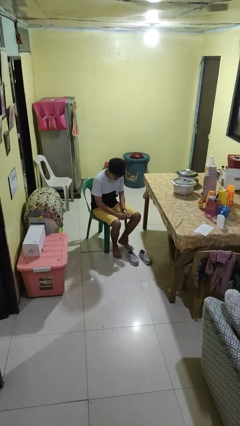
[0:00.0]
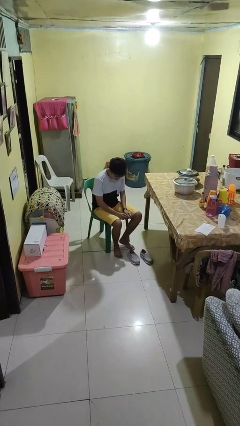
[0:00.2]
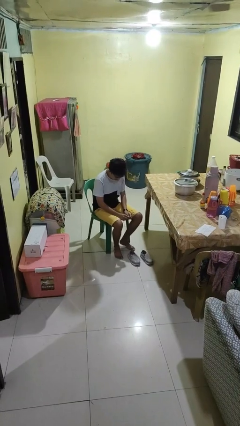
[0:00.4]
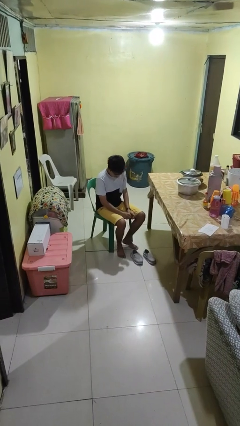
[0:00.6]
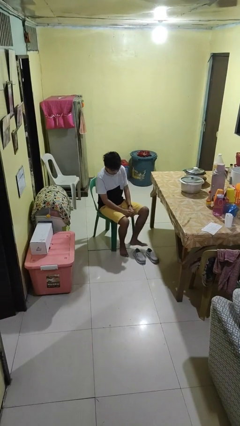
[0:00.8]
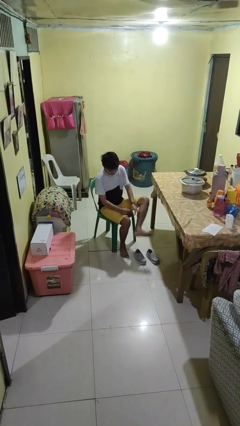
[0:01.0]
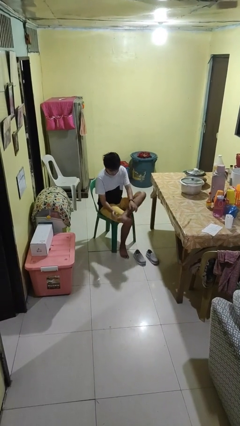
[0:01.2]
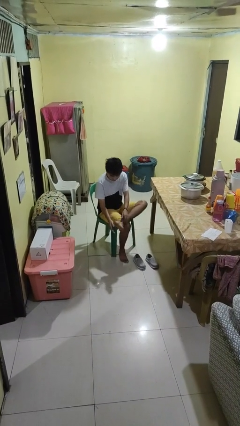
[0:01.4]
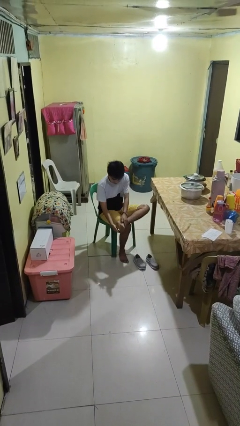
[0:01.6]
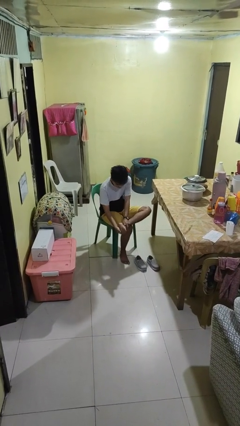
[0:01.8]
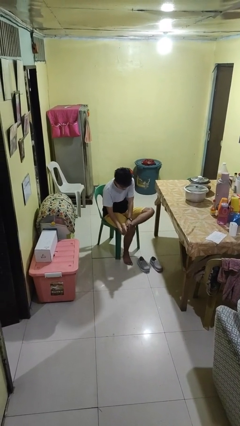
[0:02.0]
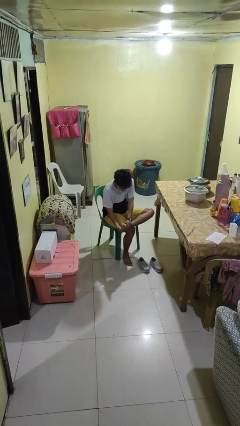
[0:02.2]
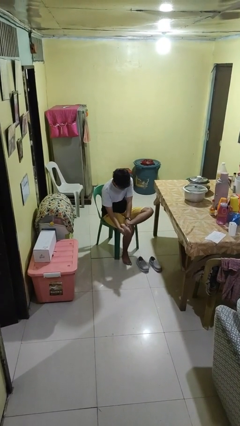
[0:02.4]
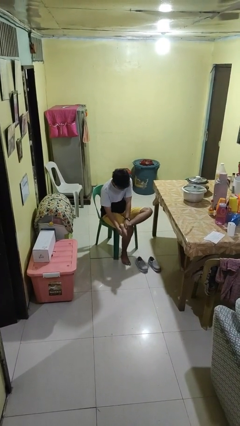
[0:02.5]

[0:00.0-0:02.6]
person rubs foot

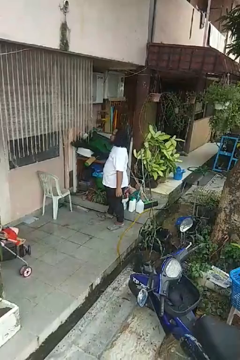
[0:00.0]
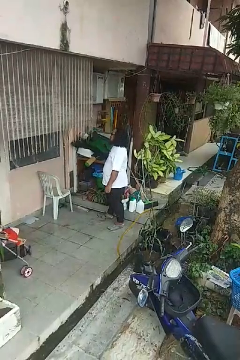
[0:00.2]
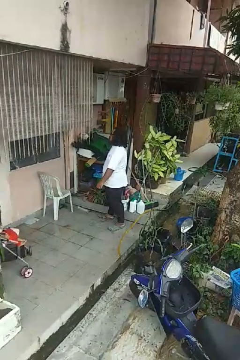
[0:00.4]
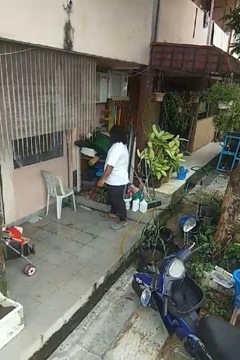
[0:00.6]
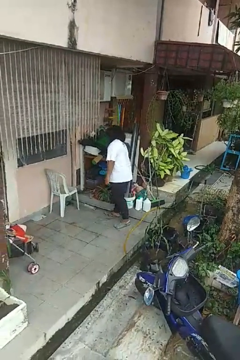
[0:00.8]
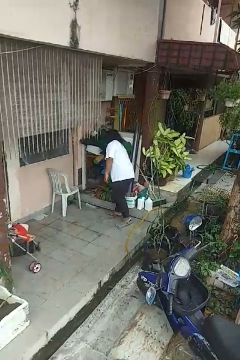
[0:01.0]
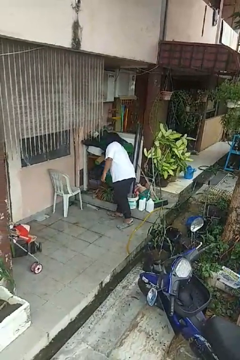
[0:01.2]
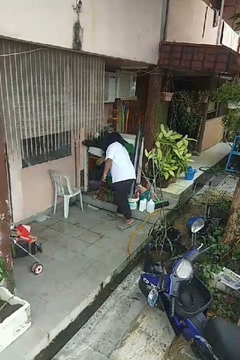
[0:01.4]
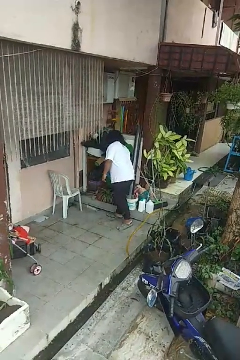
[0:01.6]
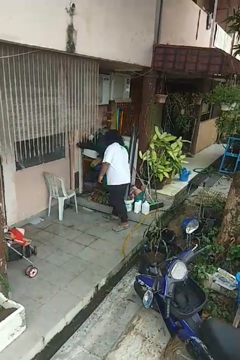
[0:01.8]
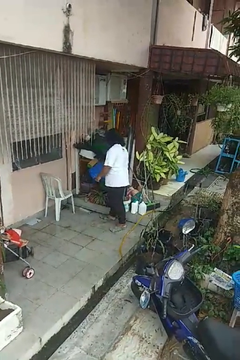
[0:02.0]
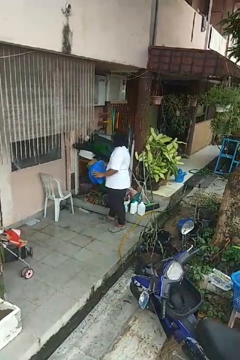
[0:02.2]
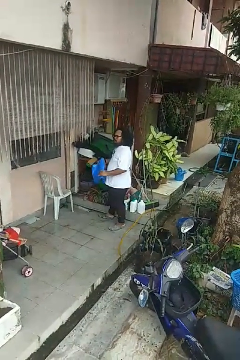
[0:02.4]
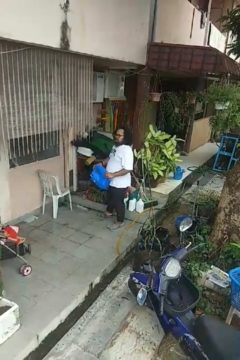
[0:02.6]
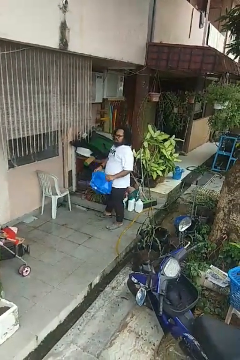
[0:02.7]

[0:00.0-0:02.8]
person picks up object from cabinet

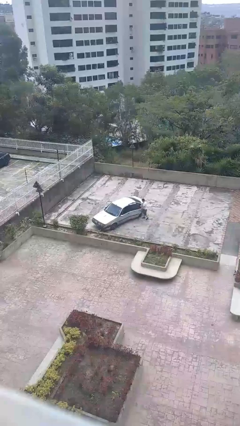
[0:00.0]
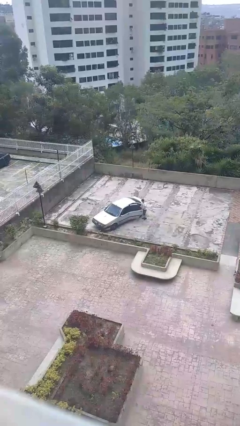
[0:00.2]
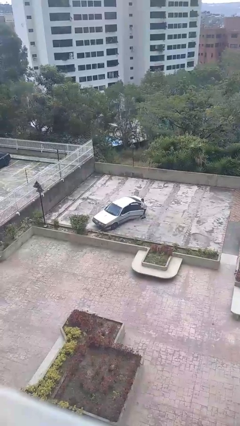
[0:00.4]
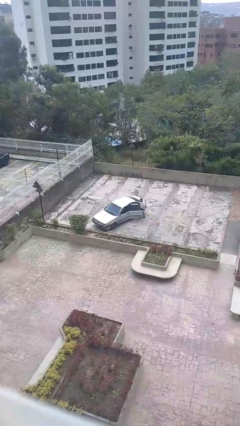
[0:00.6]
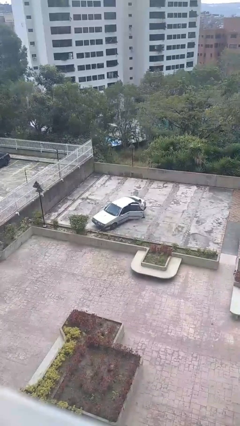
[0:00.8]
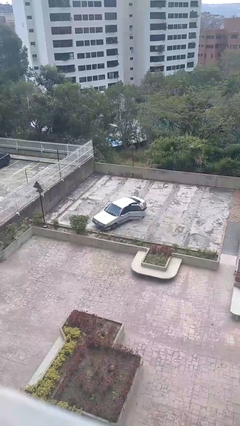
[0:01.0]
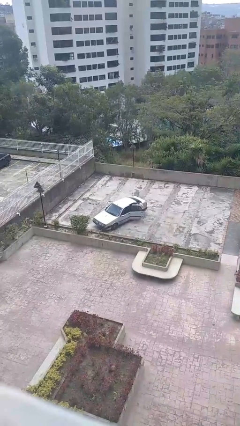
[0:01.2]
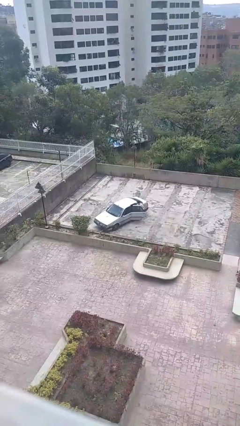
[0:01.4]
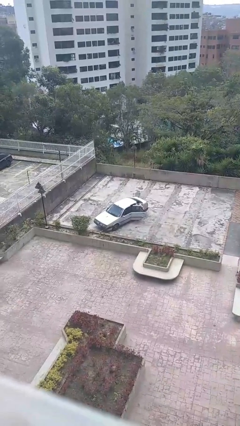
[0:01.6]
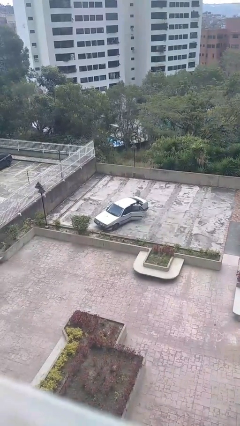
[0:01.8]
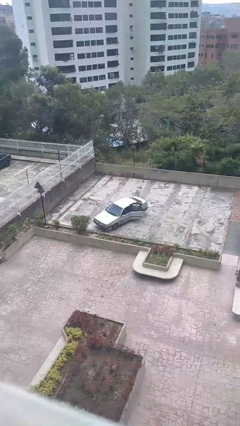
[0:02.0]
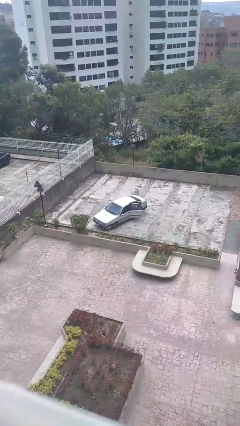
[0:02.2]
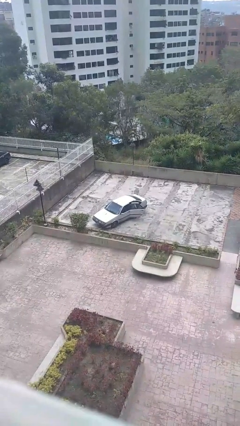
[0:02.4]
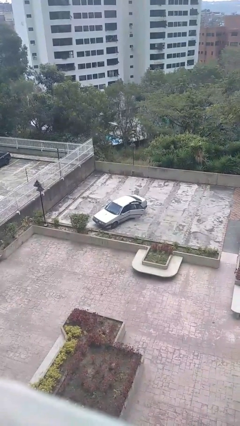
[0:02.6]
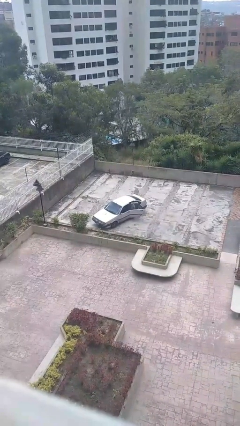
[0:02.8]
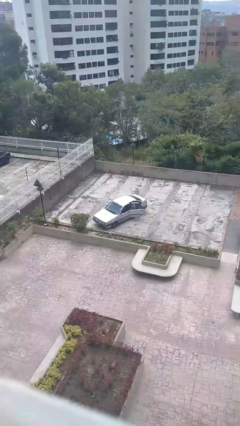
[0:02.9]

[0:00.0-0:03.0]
car picks up person

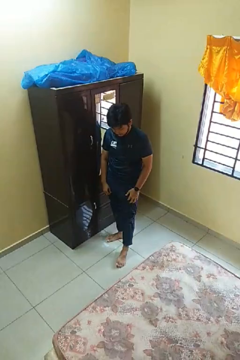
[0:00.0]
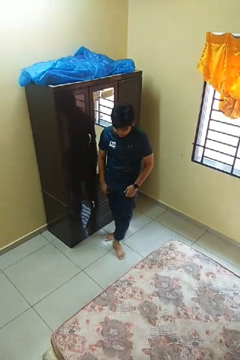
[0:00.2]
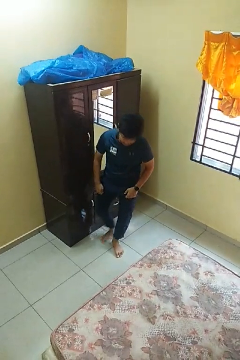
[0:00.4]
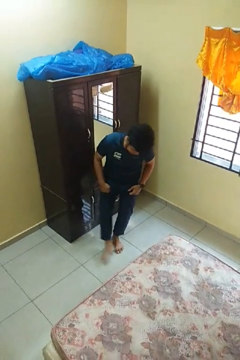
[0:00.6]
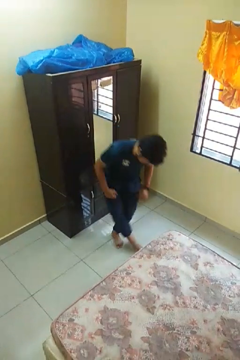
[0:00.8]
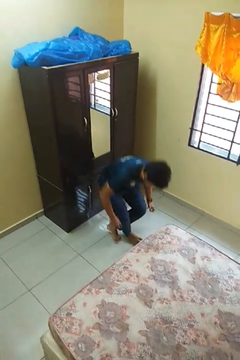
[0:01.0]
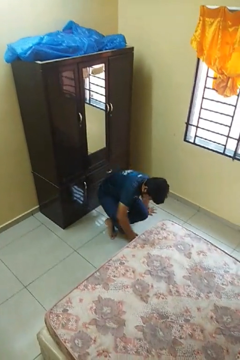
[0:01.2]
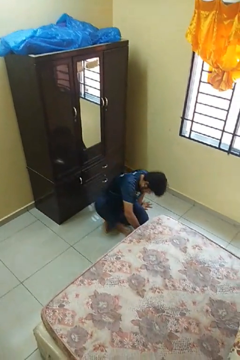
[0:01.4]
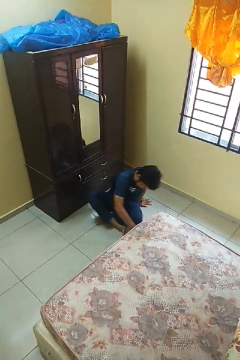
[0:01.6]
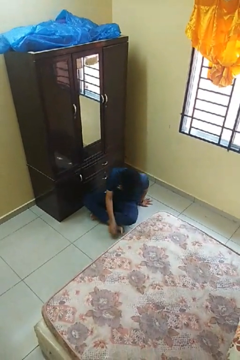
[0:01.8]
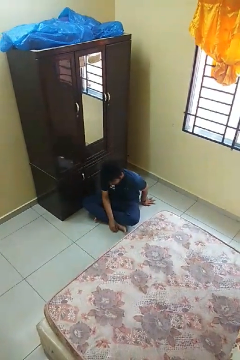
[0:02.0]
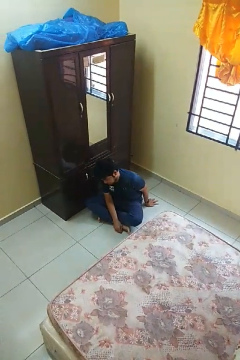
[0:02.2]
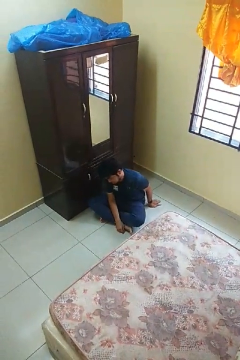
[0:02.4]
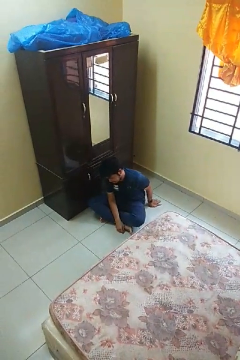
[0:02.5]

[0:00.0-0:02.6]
person sits crisscross

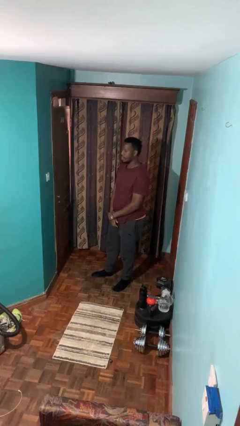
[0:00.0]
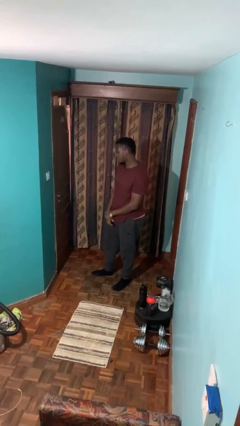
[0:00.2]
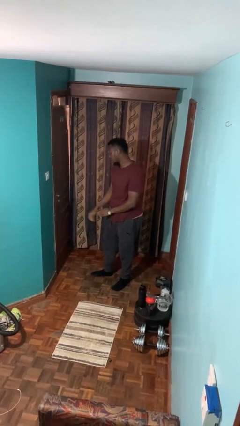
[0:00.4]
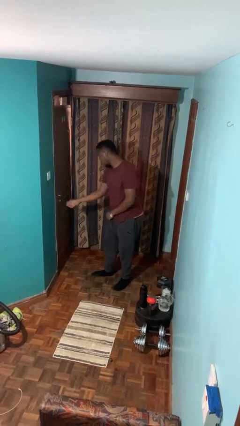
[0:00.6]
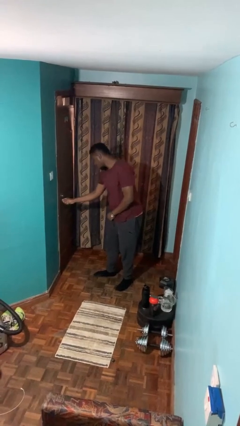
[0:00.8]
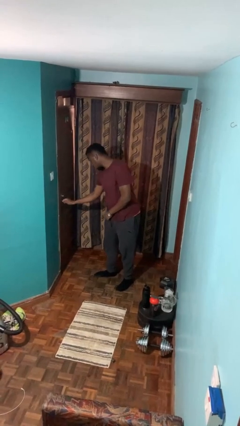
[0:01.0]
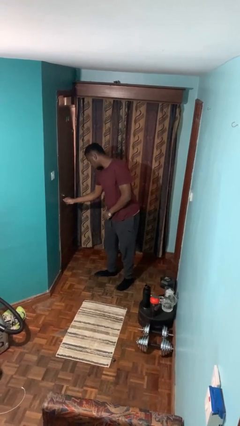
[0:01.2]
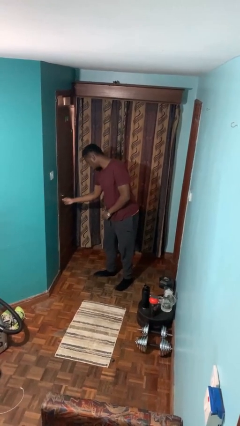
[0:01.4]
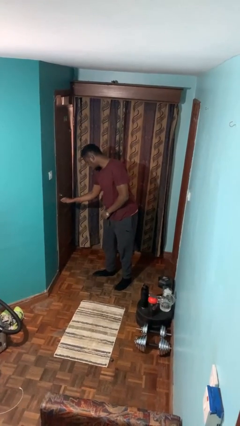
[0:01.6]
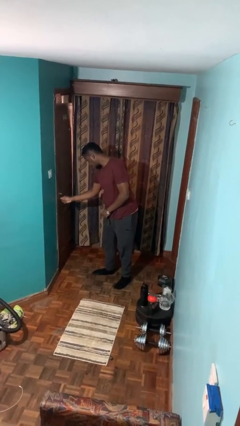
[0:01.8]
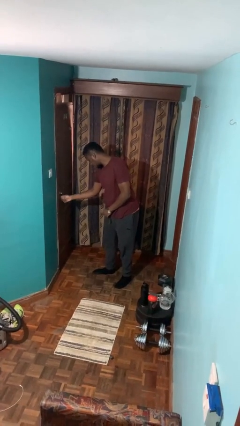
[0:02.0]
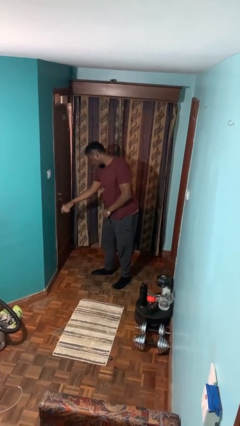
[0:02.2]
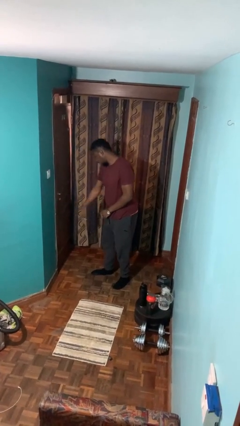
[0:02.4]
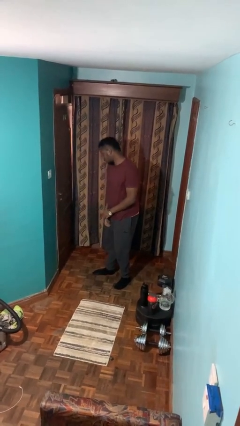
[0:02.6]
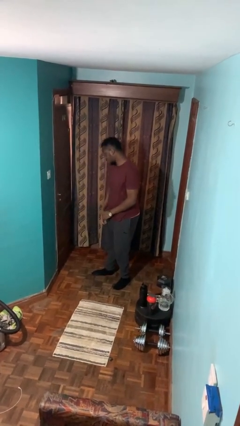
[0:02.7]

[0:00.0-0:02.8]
person unlocks door with keys

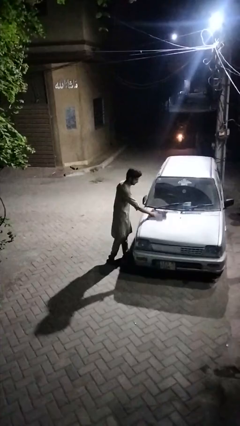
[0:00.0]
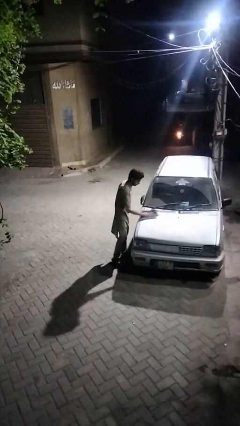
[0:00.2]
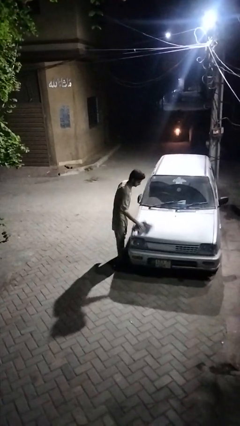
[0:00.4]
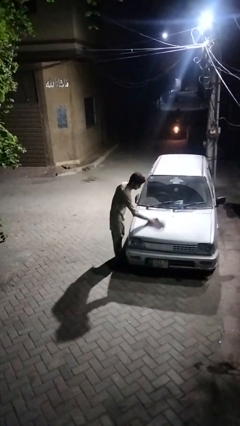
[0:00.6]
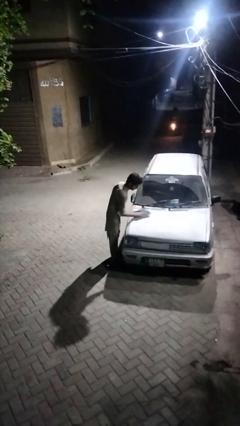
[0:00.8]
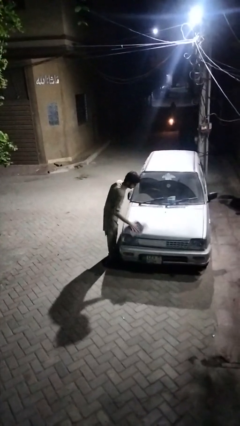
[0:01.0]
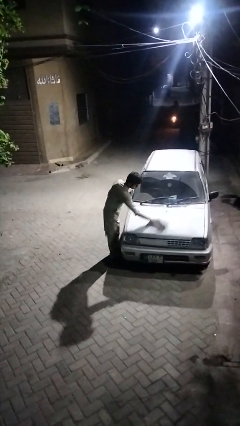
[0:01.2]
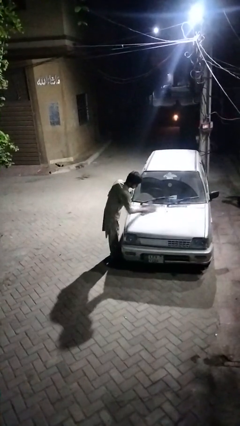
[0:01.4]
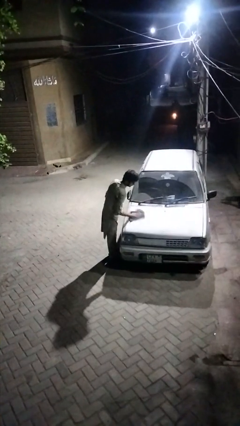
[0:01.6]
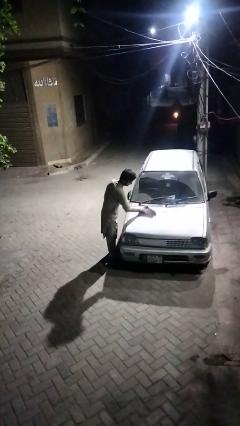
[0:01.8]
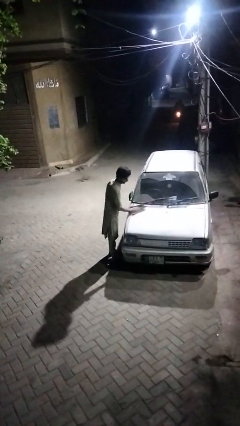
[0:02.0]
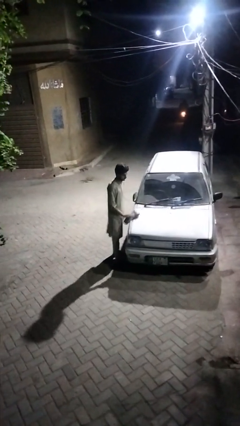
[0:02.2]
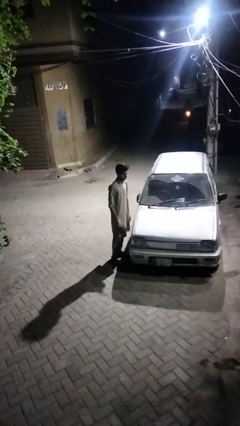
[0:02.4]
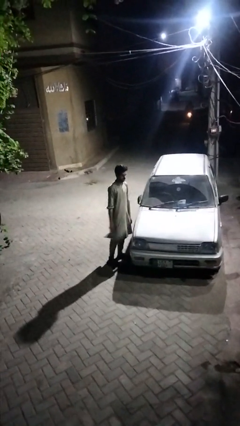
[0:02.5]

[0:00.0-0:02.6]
person polishes car with rag

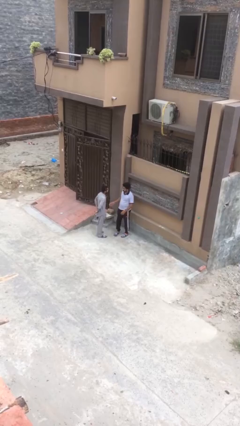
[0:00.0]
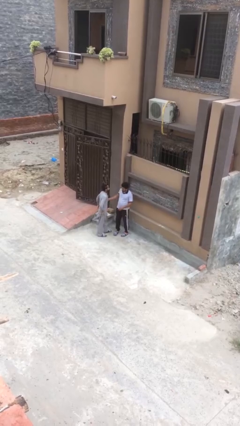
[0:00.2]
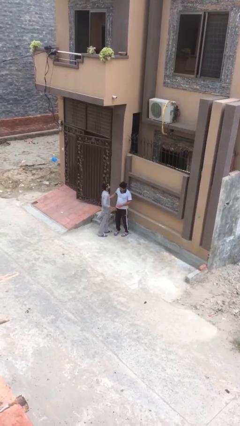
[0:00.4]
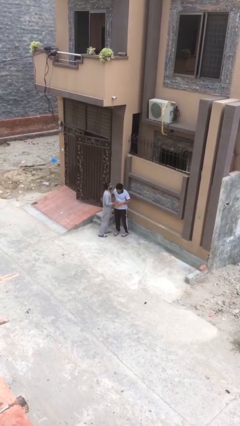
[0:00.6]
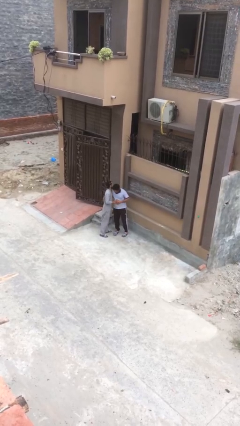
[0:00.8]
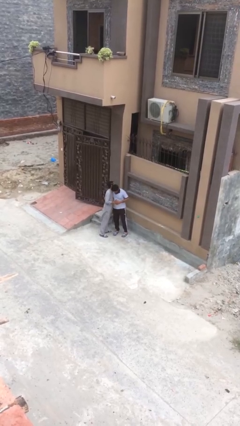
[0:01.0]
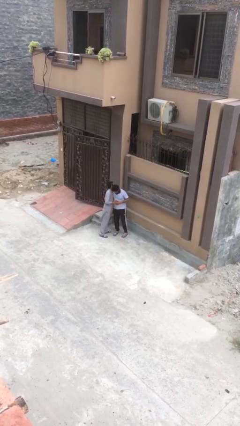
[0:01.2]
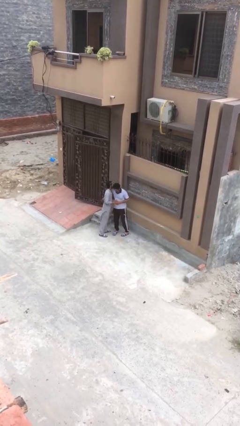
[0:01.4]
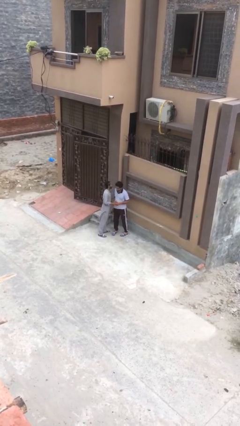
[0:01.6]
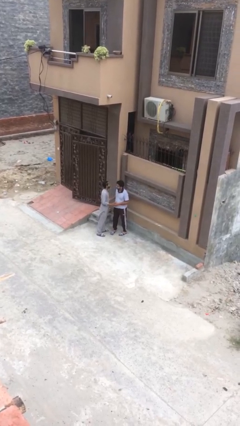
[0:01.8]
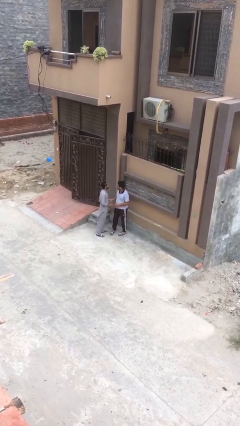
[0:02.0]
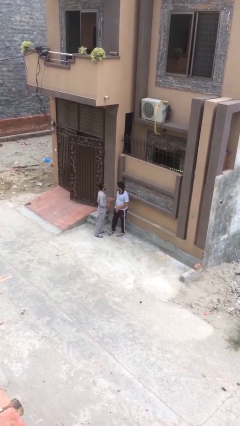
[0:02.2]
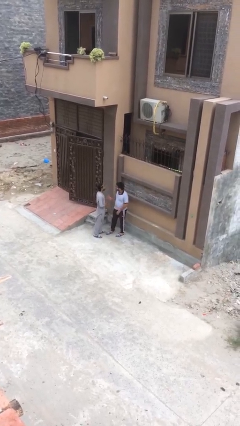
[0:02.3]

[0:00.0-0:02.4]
person embraces person
